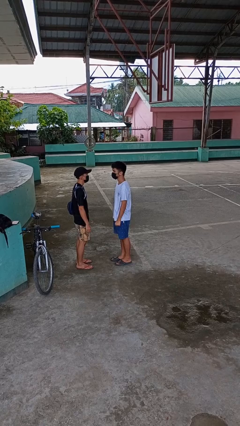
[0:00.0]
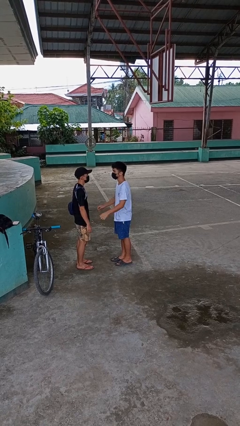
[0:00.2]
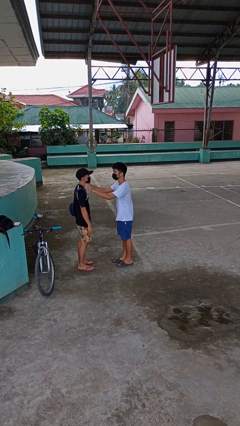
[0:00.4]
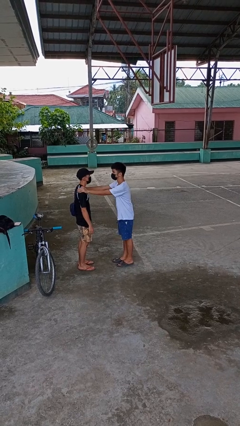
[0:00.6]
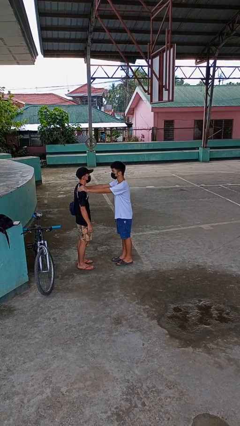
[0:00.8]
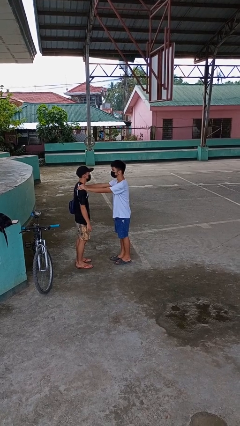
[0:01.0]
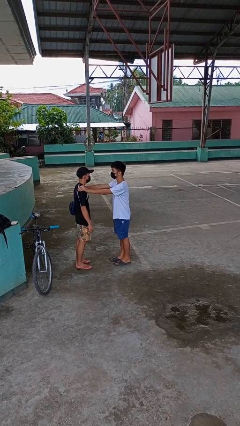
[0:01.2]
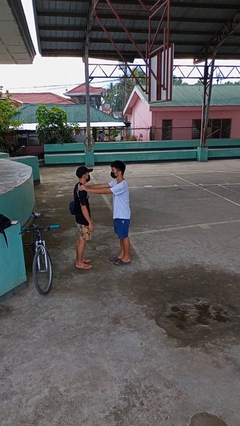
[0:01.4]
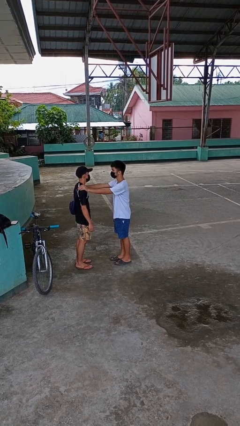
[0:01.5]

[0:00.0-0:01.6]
person grabs person by shoulder

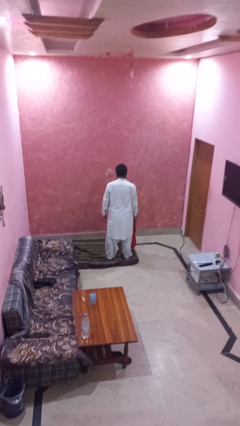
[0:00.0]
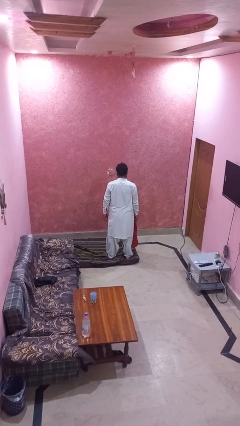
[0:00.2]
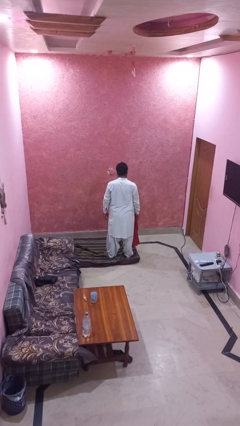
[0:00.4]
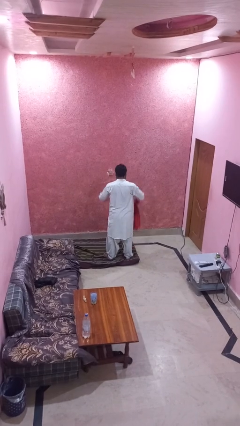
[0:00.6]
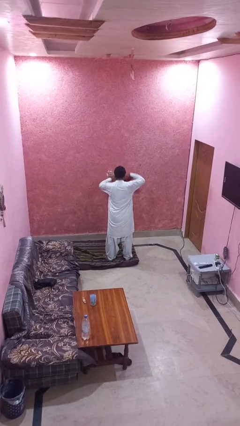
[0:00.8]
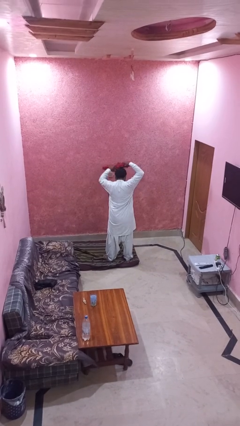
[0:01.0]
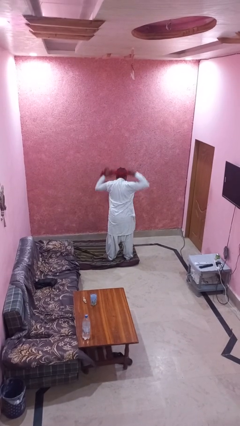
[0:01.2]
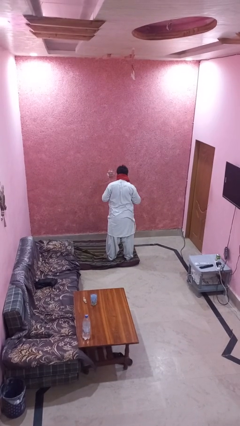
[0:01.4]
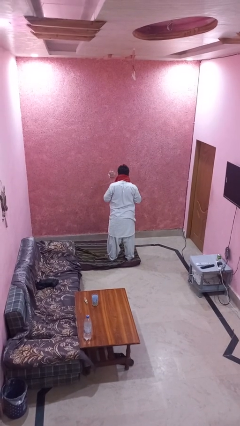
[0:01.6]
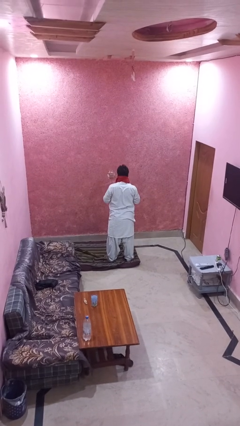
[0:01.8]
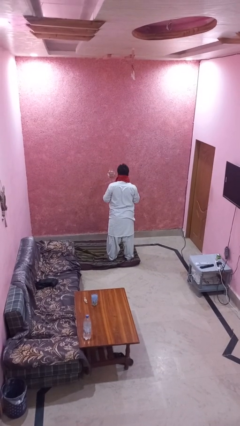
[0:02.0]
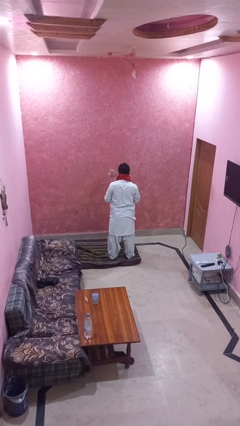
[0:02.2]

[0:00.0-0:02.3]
person puts on scarf

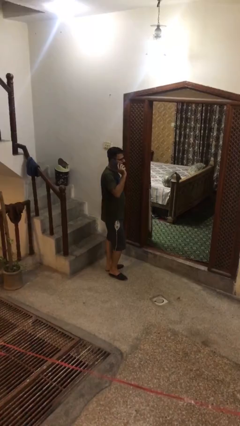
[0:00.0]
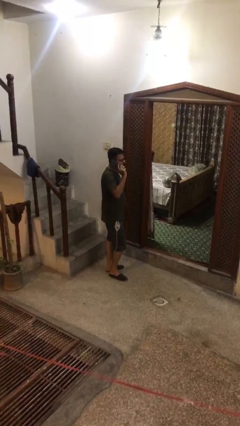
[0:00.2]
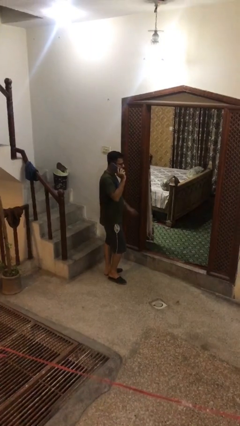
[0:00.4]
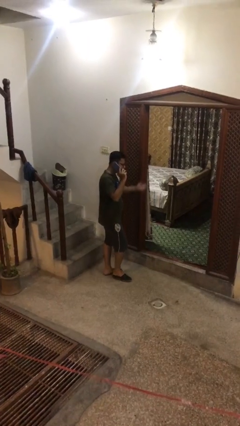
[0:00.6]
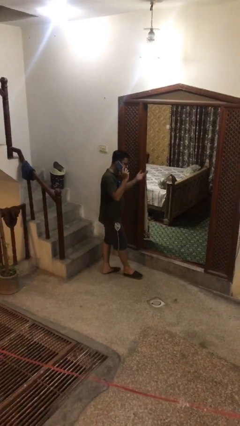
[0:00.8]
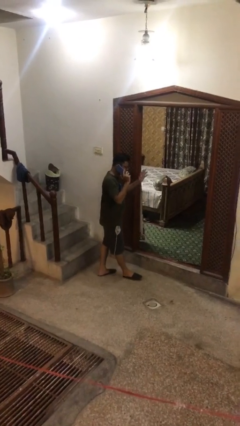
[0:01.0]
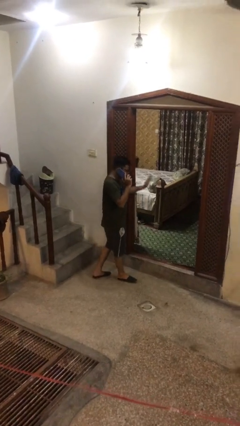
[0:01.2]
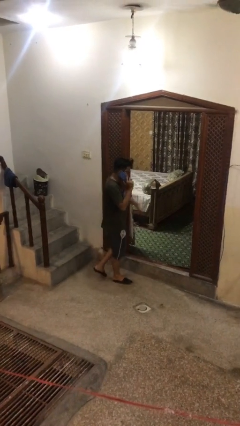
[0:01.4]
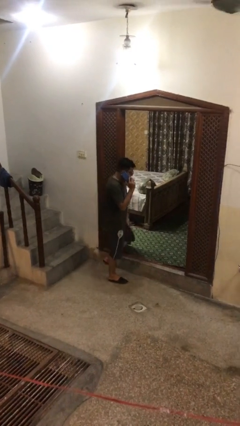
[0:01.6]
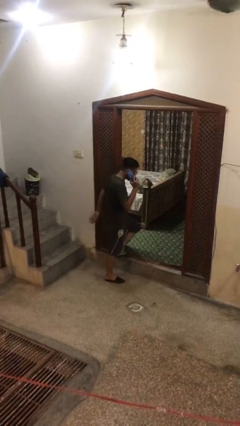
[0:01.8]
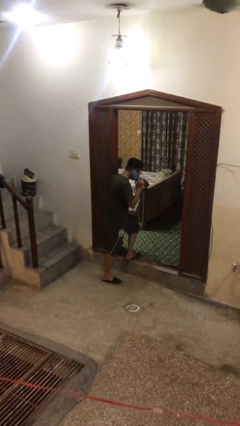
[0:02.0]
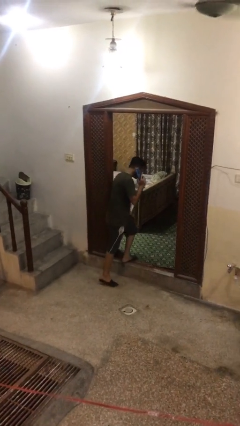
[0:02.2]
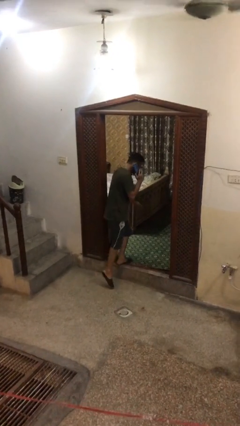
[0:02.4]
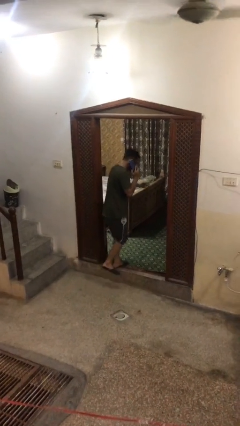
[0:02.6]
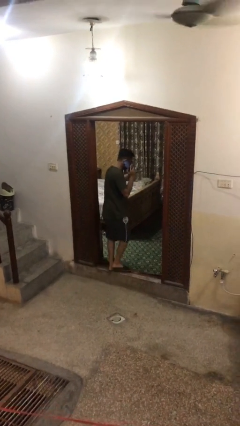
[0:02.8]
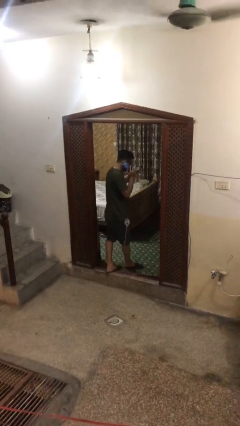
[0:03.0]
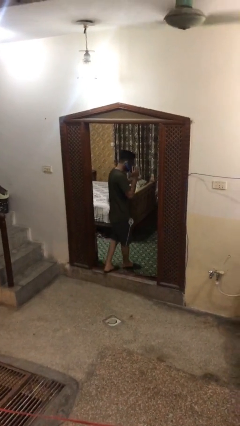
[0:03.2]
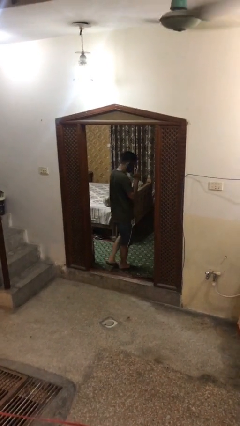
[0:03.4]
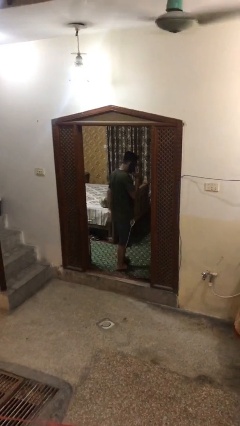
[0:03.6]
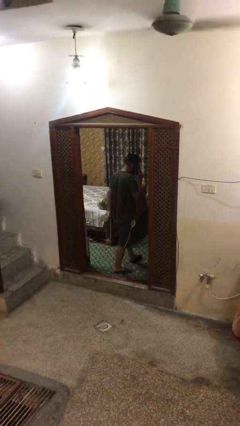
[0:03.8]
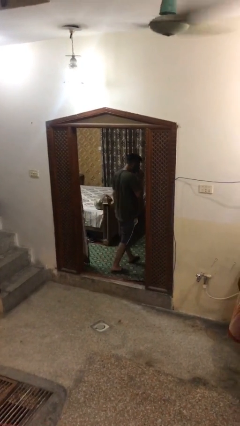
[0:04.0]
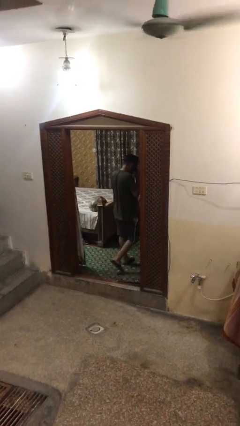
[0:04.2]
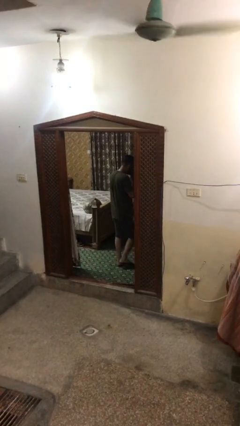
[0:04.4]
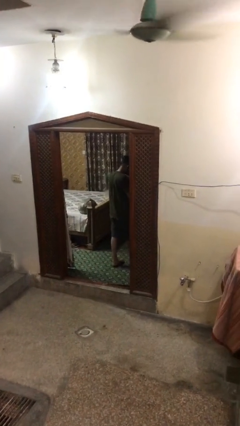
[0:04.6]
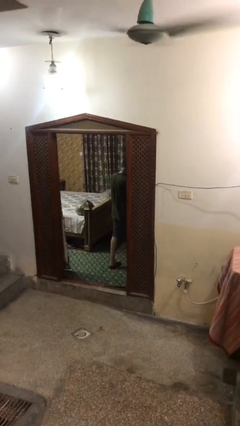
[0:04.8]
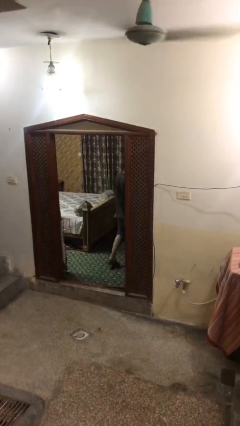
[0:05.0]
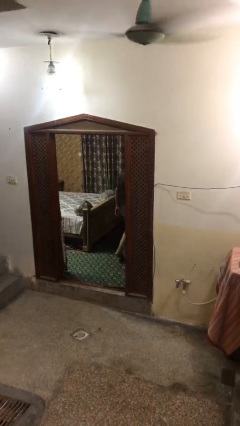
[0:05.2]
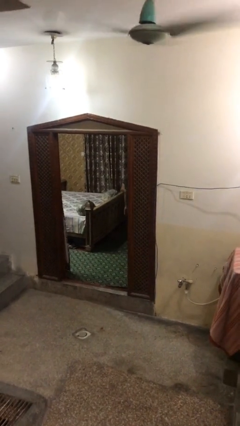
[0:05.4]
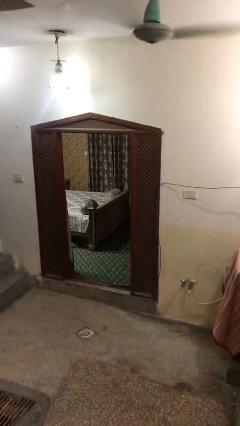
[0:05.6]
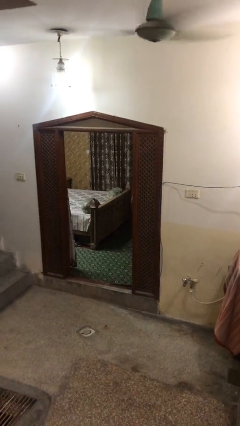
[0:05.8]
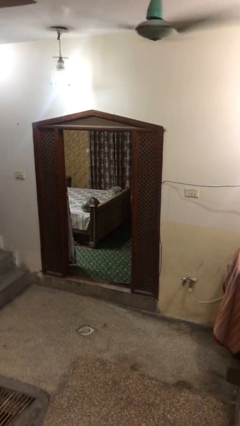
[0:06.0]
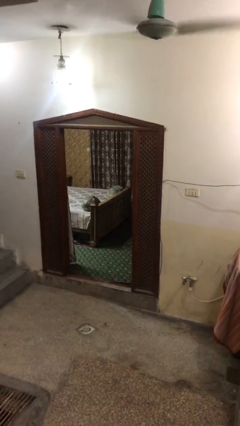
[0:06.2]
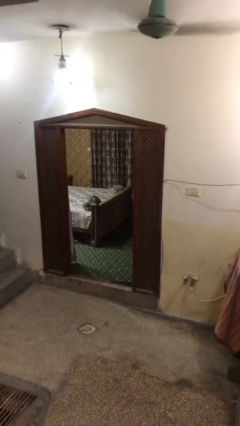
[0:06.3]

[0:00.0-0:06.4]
person exits scene through structure

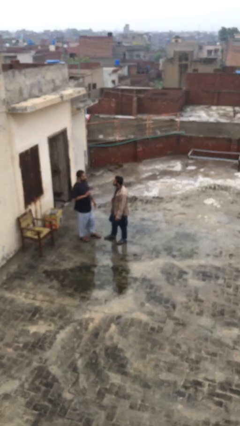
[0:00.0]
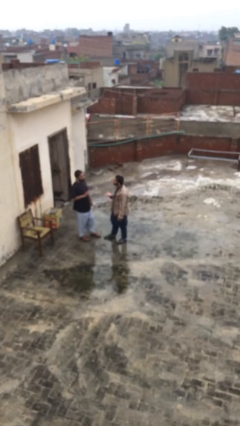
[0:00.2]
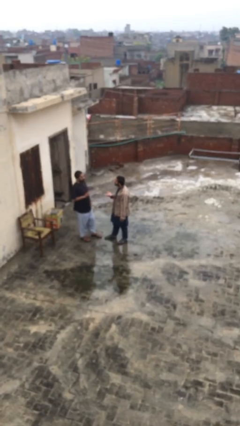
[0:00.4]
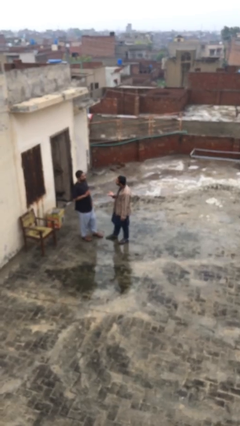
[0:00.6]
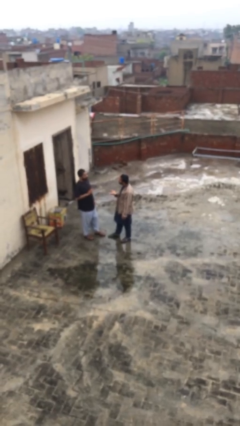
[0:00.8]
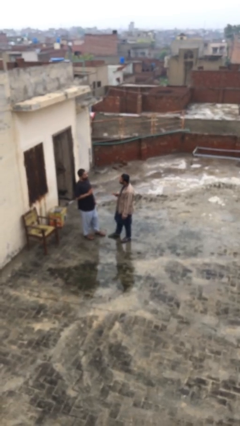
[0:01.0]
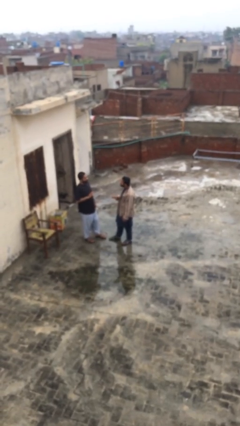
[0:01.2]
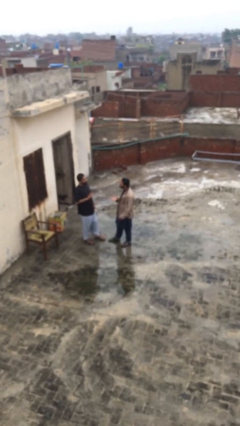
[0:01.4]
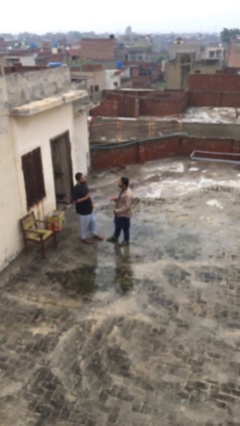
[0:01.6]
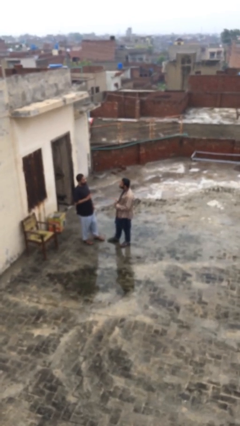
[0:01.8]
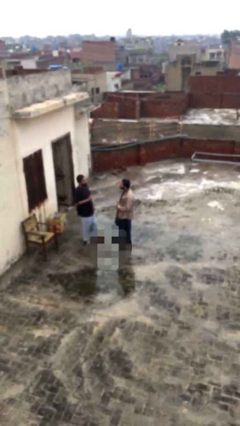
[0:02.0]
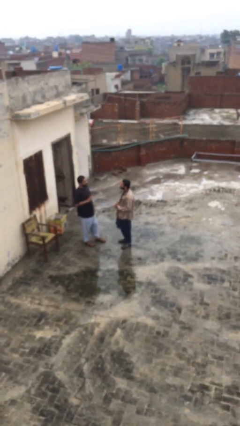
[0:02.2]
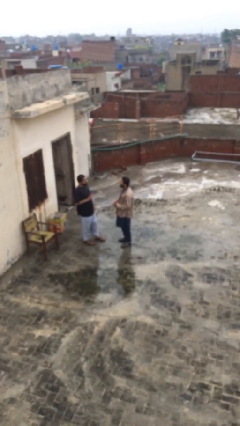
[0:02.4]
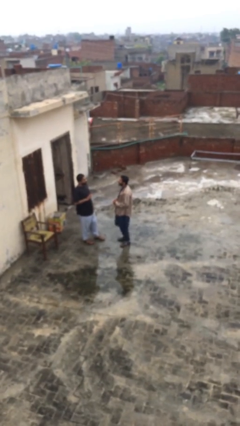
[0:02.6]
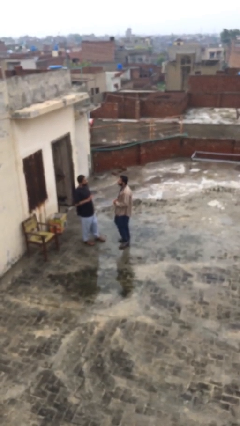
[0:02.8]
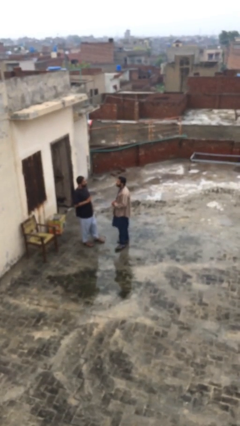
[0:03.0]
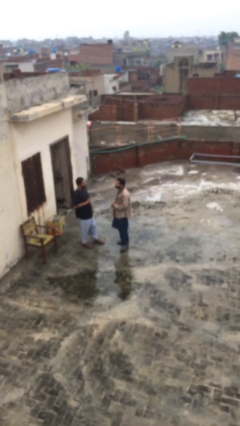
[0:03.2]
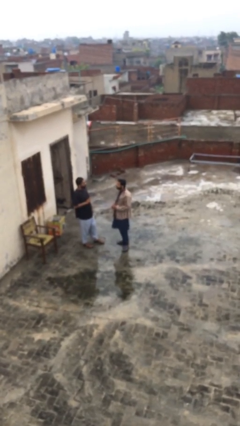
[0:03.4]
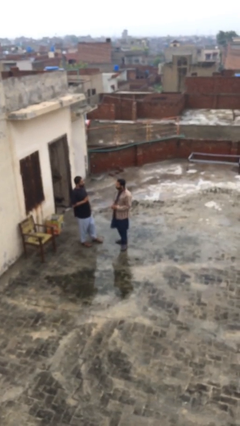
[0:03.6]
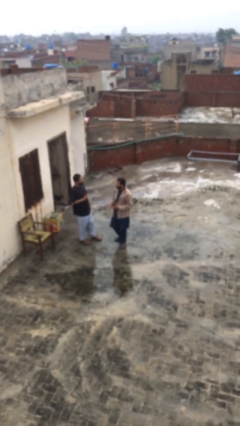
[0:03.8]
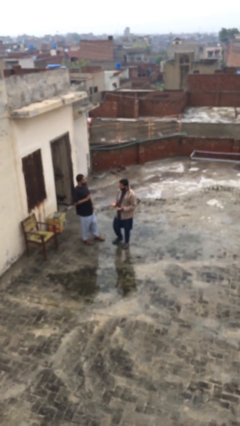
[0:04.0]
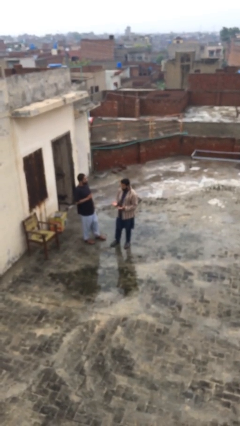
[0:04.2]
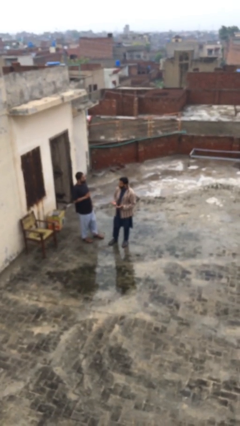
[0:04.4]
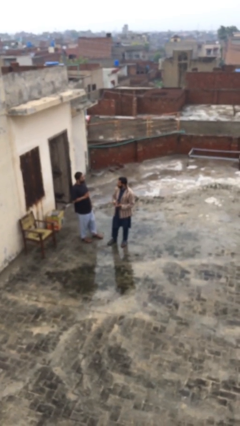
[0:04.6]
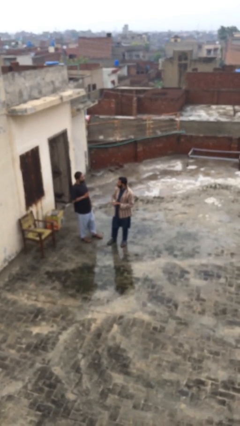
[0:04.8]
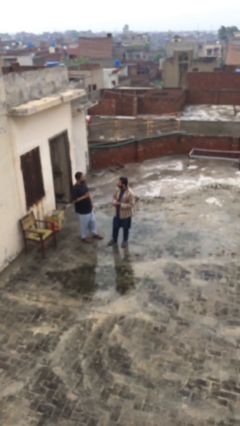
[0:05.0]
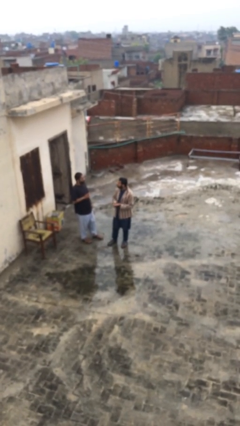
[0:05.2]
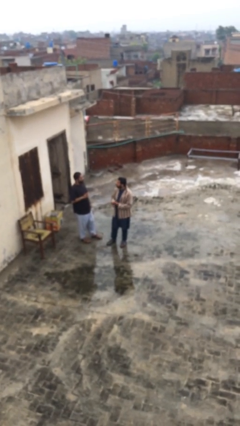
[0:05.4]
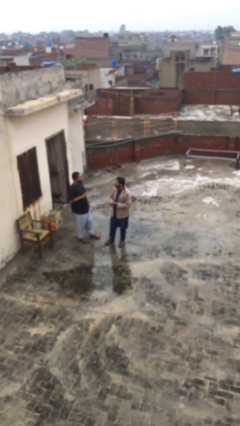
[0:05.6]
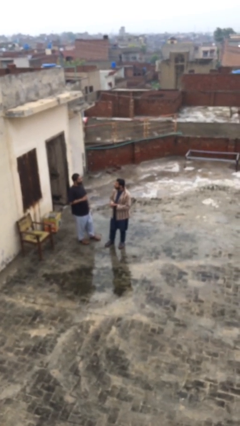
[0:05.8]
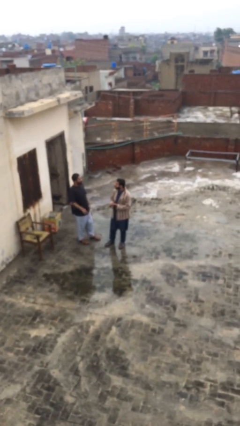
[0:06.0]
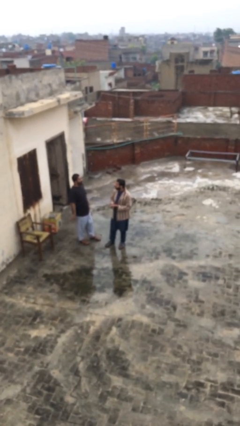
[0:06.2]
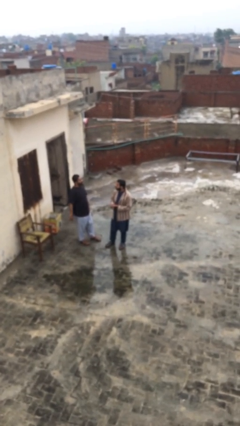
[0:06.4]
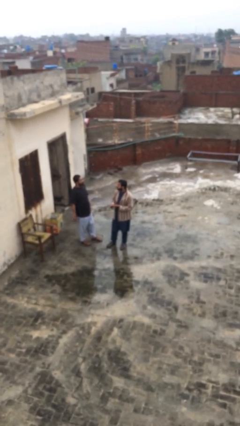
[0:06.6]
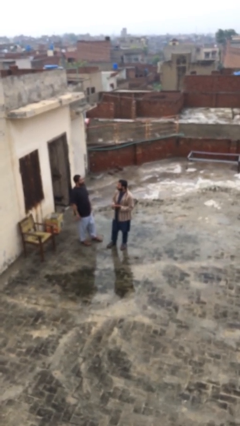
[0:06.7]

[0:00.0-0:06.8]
person talks to person

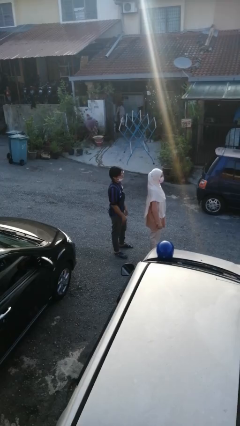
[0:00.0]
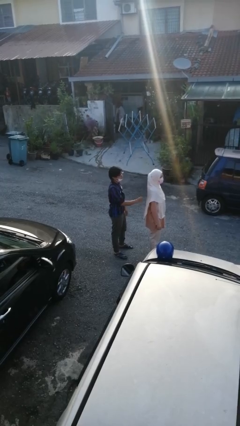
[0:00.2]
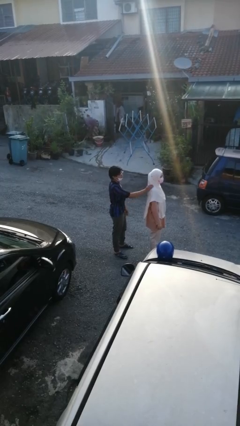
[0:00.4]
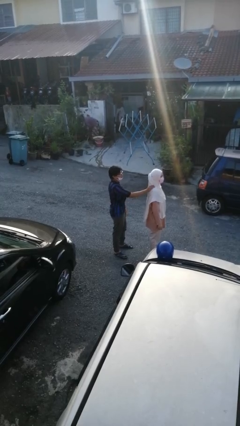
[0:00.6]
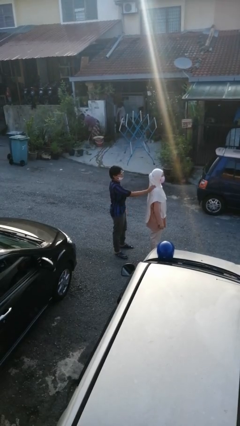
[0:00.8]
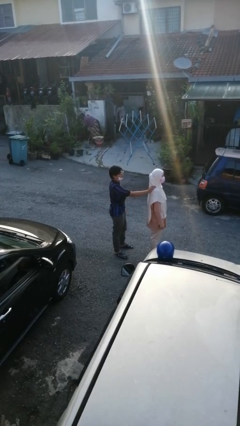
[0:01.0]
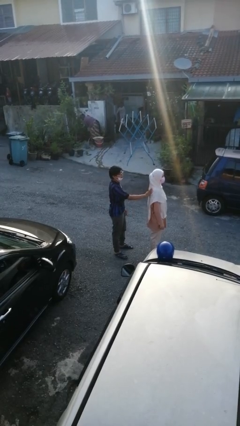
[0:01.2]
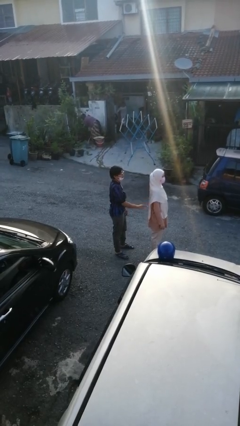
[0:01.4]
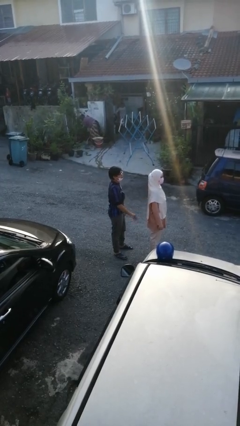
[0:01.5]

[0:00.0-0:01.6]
person touches back of person
